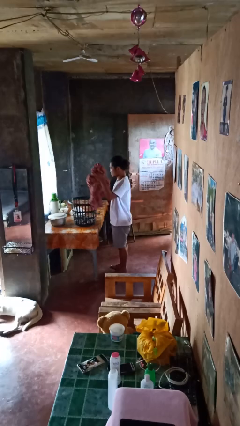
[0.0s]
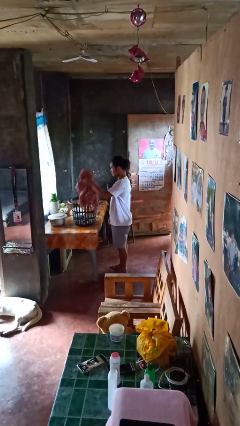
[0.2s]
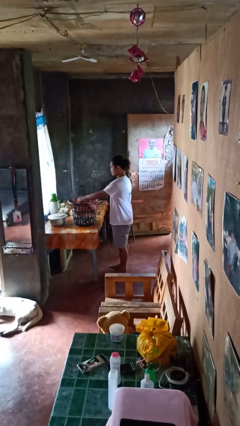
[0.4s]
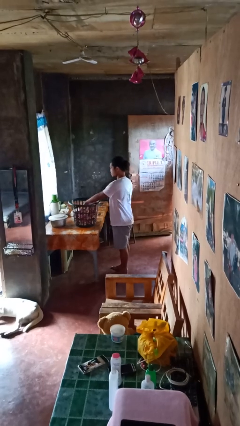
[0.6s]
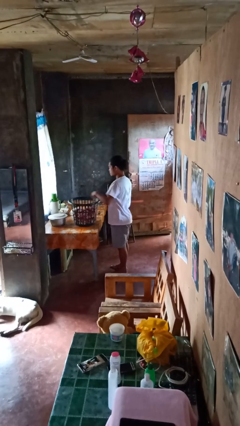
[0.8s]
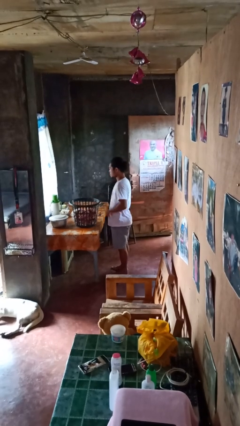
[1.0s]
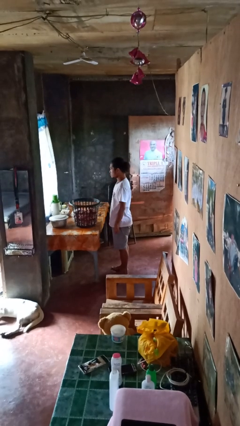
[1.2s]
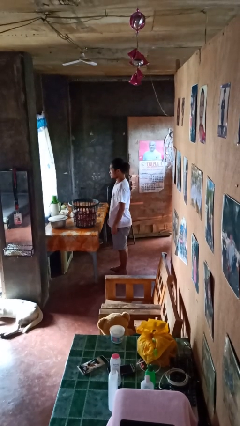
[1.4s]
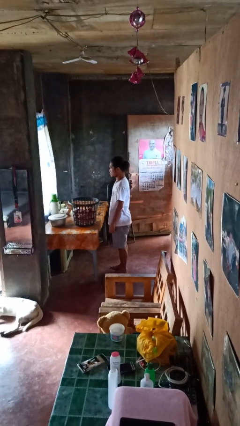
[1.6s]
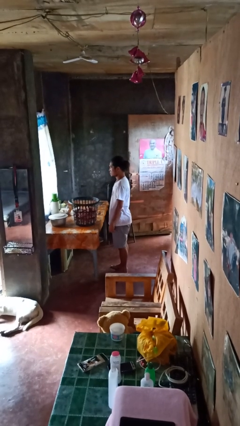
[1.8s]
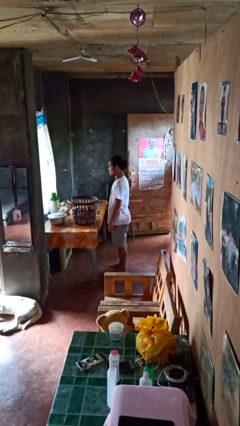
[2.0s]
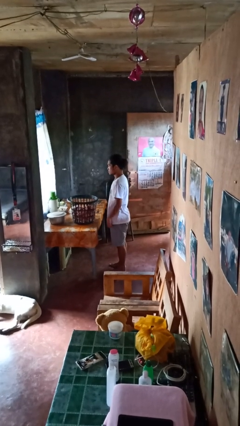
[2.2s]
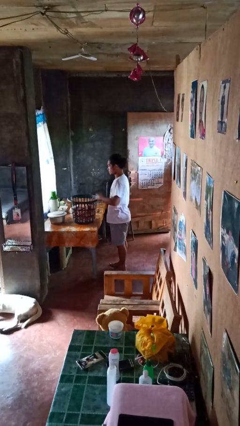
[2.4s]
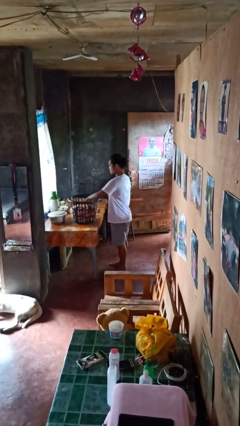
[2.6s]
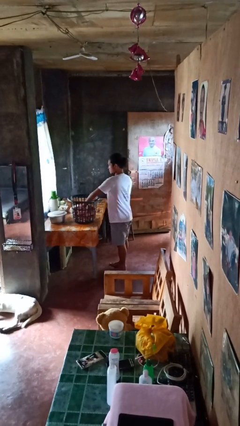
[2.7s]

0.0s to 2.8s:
person puts object into basket

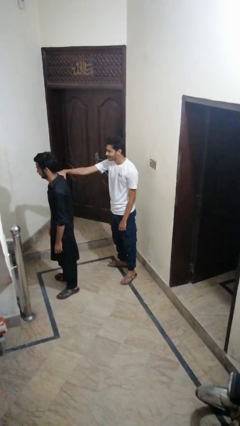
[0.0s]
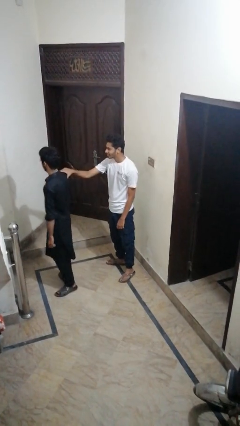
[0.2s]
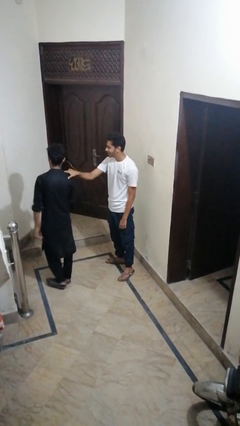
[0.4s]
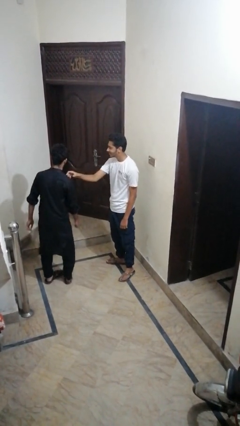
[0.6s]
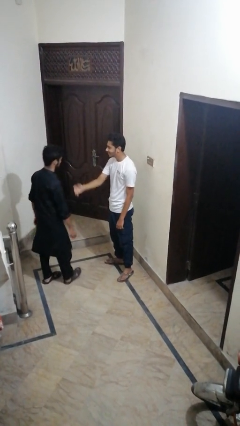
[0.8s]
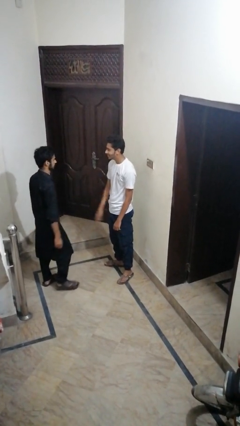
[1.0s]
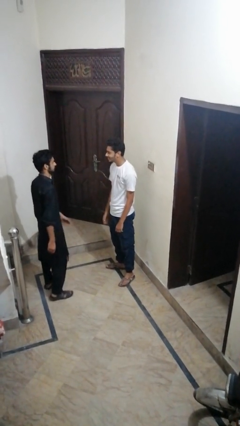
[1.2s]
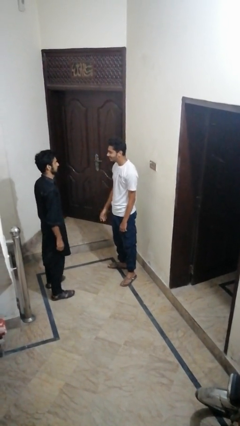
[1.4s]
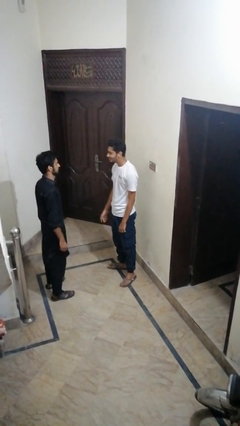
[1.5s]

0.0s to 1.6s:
person spins person around

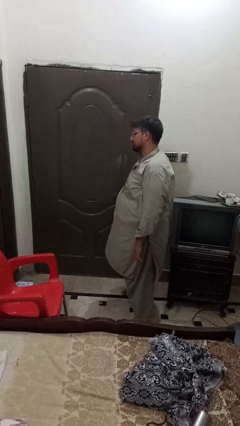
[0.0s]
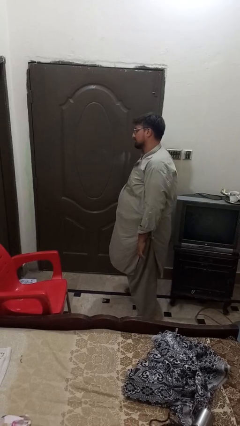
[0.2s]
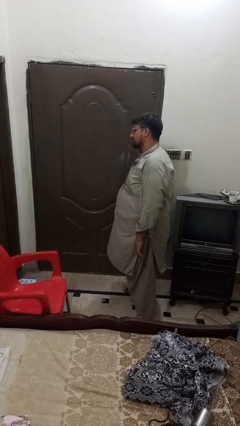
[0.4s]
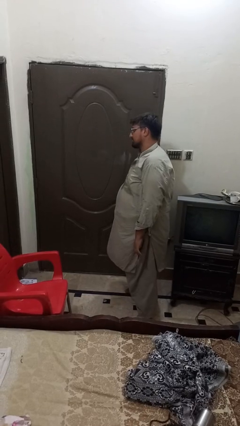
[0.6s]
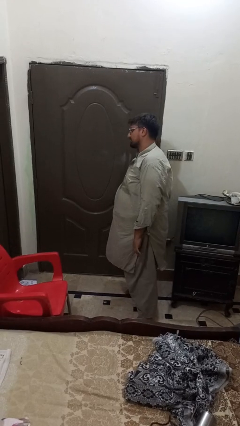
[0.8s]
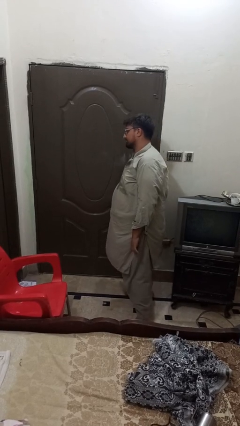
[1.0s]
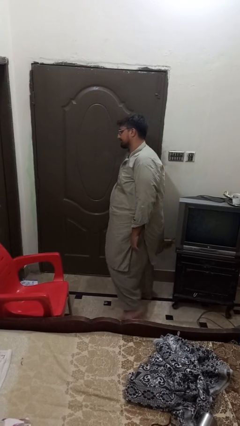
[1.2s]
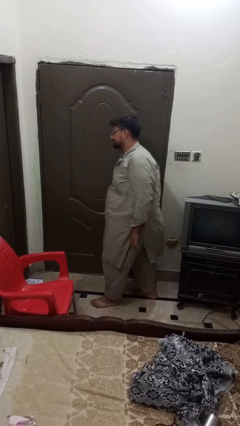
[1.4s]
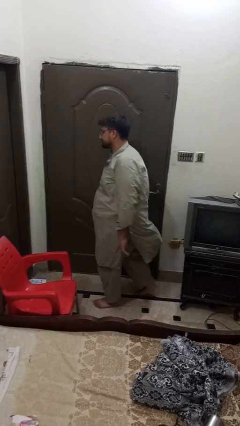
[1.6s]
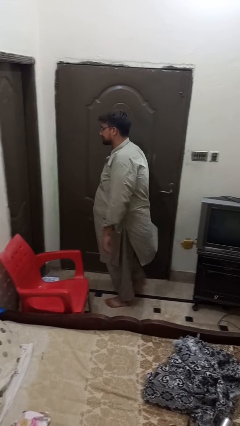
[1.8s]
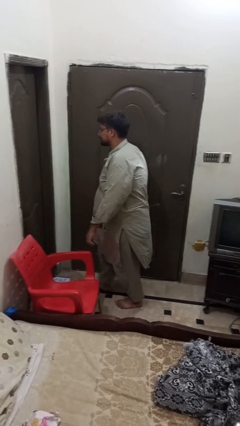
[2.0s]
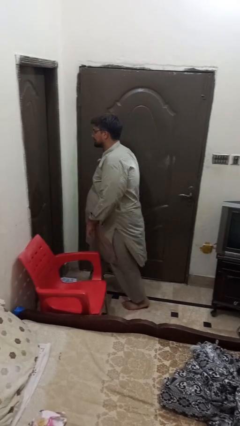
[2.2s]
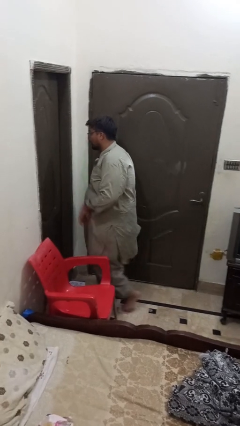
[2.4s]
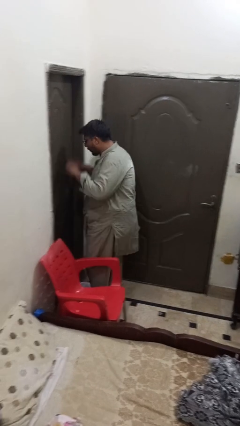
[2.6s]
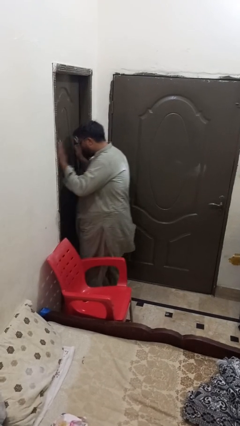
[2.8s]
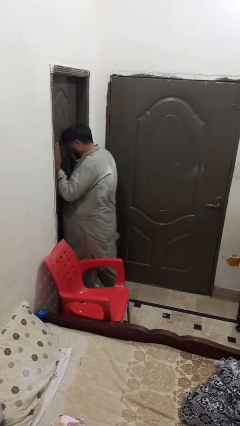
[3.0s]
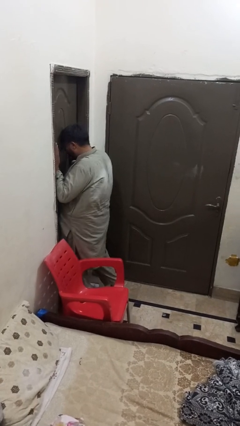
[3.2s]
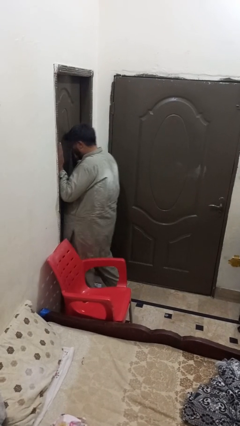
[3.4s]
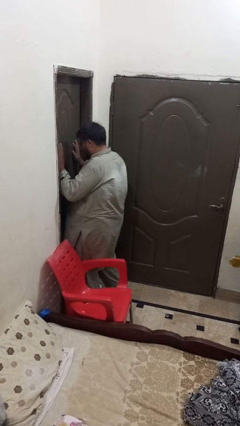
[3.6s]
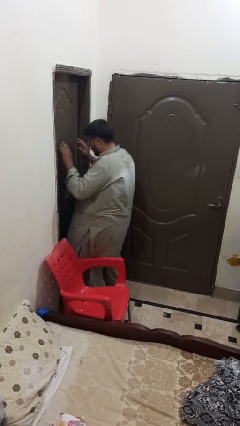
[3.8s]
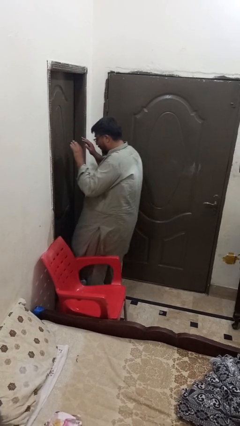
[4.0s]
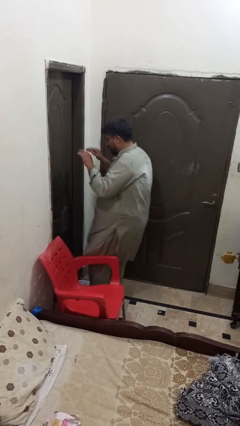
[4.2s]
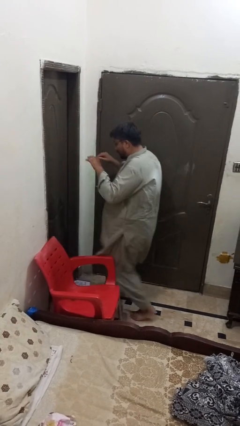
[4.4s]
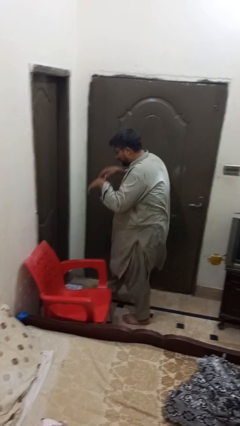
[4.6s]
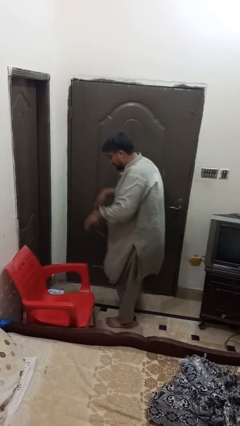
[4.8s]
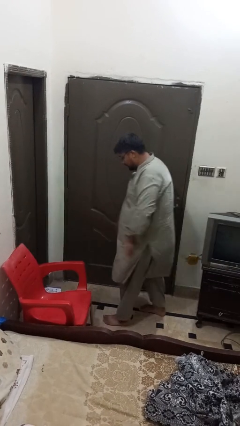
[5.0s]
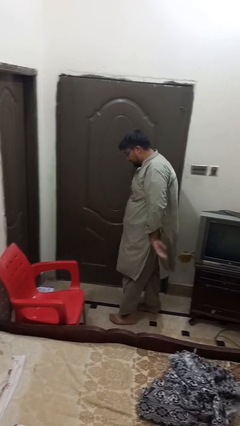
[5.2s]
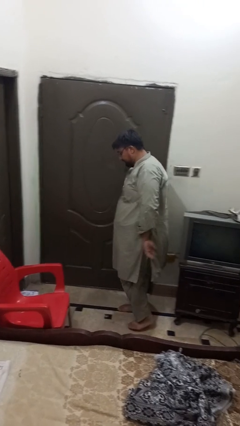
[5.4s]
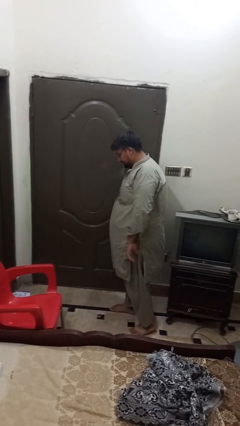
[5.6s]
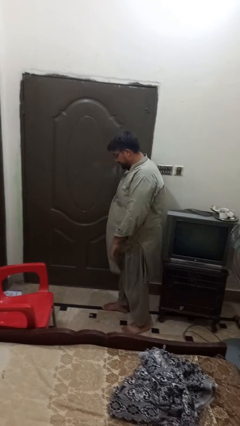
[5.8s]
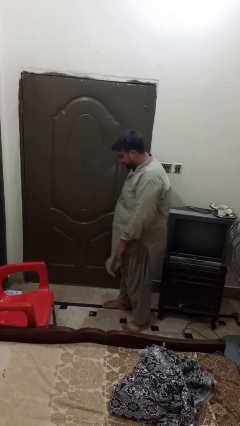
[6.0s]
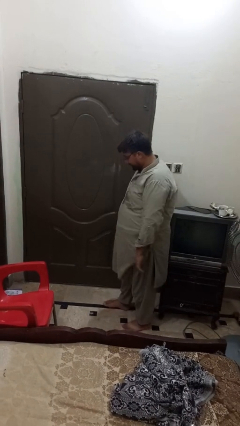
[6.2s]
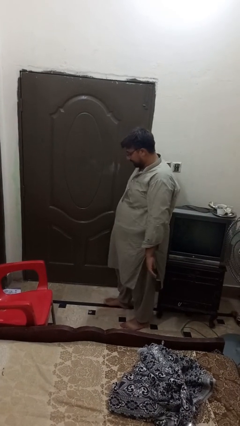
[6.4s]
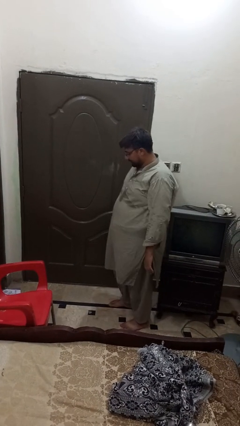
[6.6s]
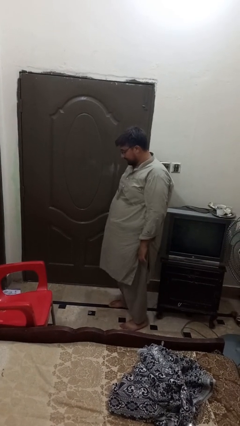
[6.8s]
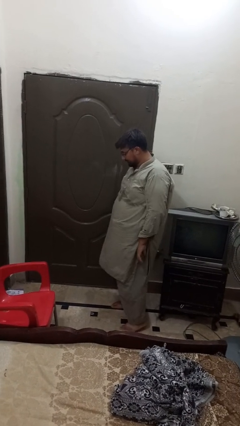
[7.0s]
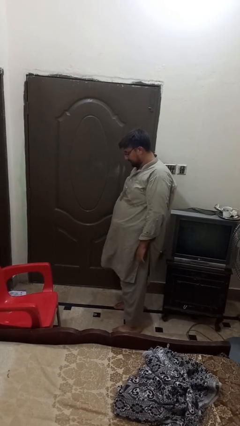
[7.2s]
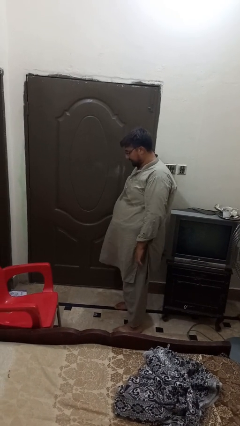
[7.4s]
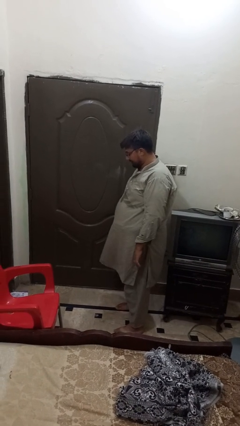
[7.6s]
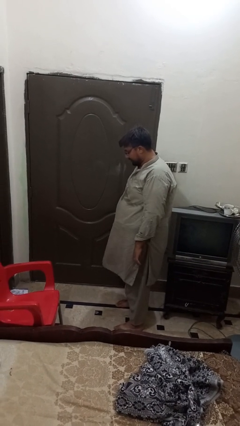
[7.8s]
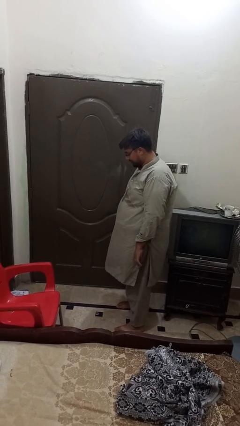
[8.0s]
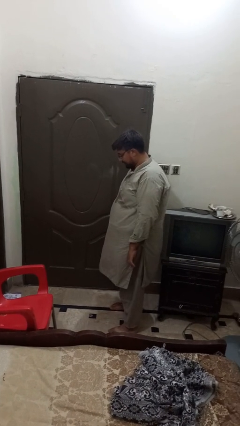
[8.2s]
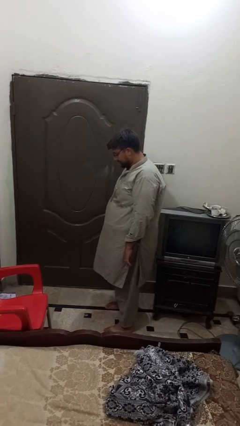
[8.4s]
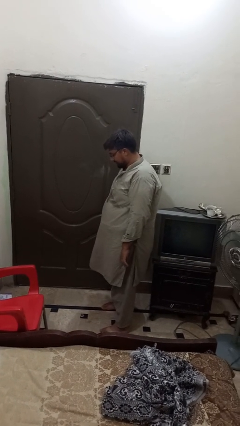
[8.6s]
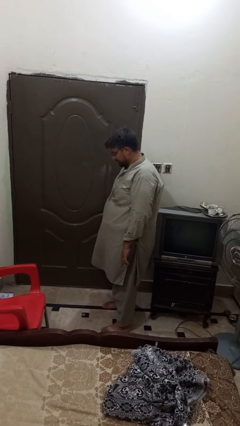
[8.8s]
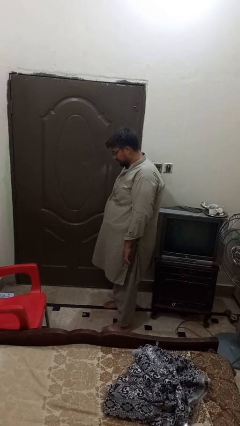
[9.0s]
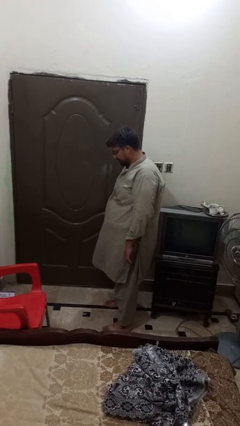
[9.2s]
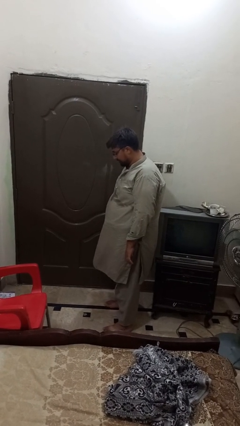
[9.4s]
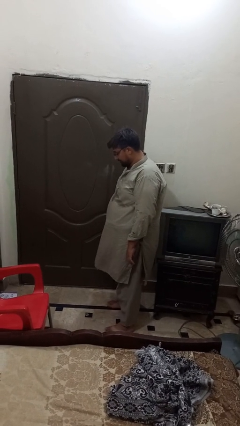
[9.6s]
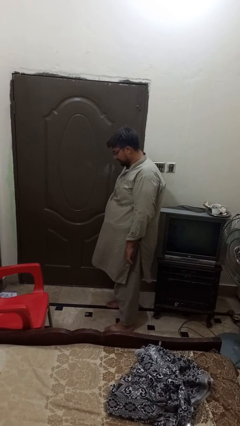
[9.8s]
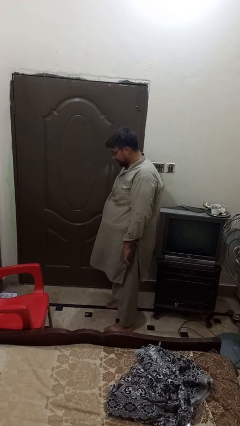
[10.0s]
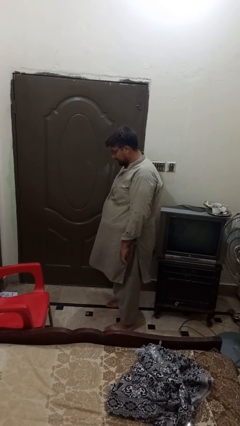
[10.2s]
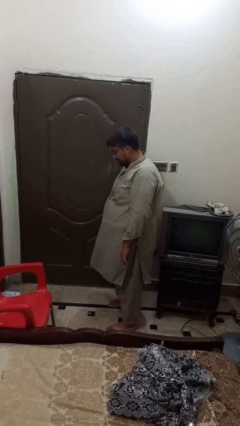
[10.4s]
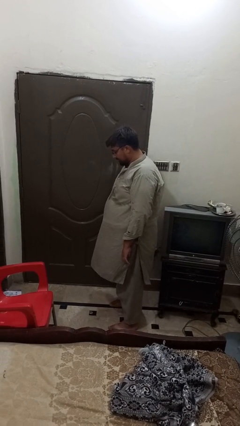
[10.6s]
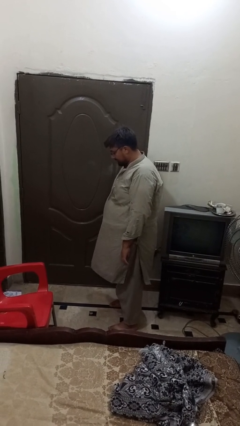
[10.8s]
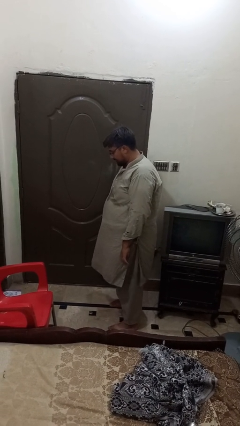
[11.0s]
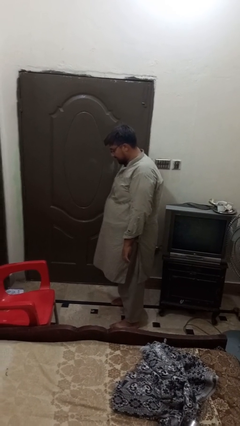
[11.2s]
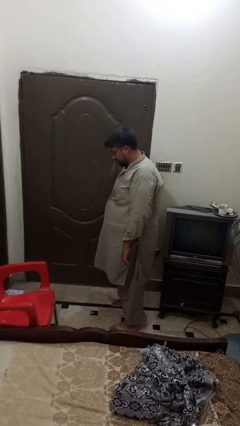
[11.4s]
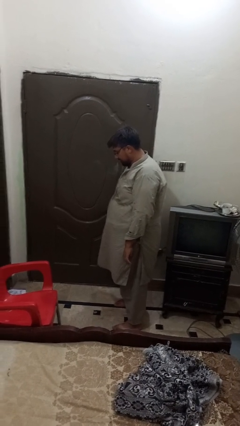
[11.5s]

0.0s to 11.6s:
person bumps into wall

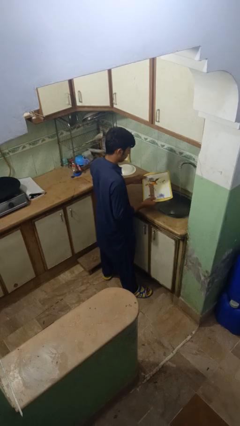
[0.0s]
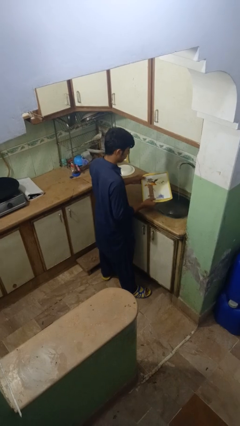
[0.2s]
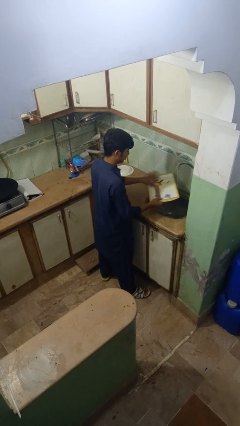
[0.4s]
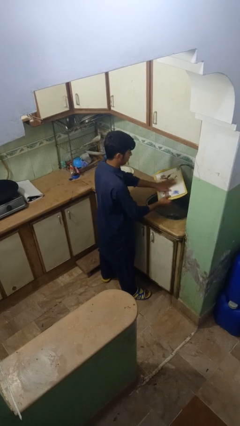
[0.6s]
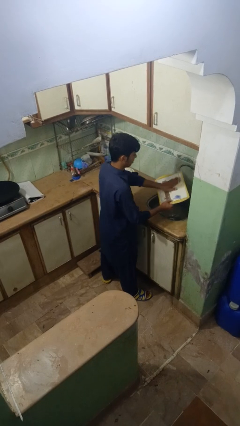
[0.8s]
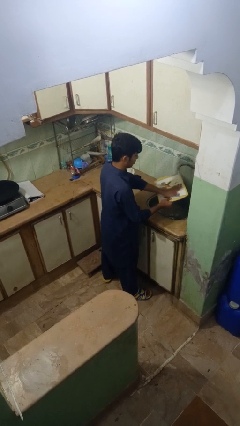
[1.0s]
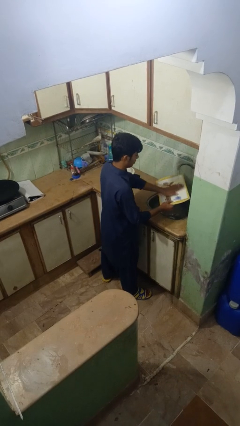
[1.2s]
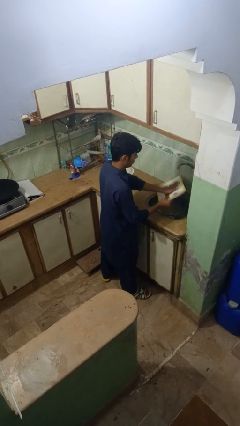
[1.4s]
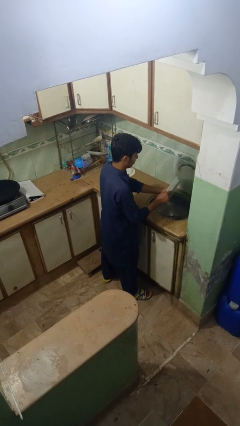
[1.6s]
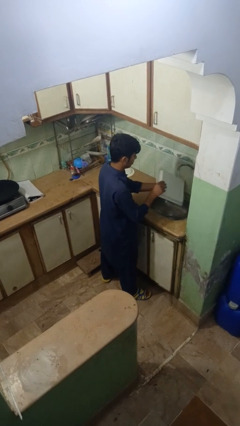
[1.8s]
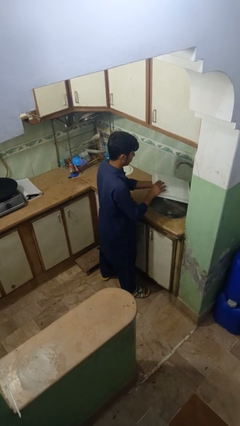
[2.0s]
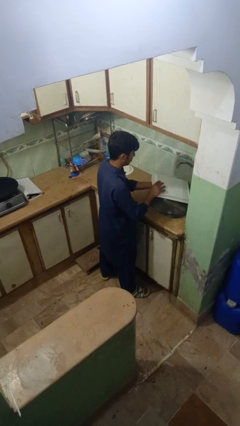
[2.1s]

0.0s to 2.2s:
person washes dish
